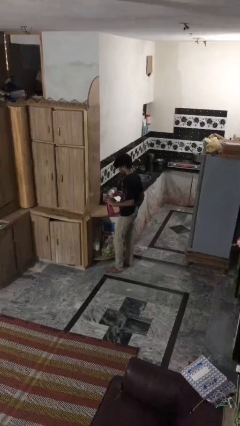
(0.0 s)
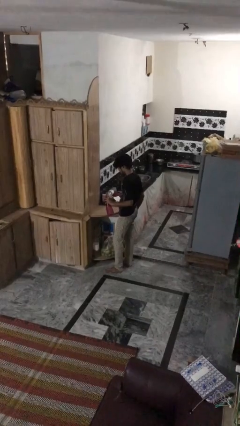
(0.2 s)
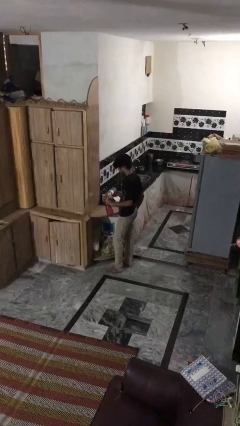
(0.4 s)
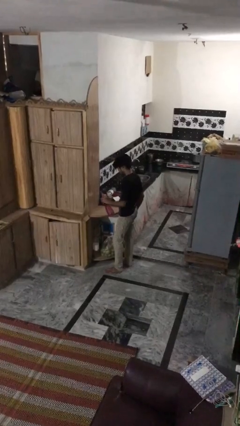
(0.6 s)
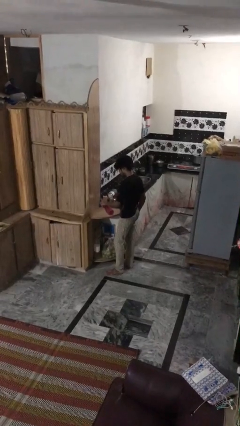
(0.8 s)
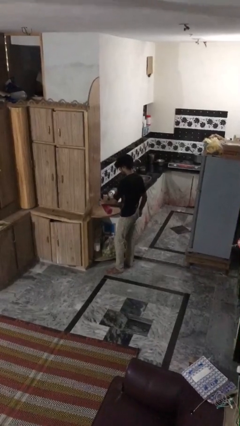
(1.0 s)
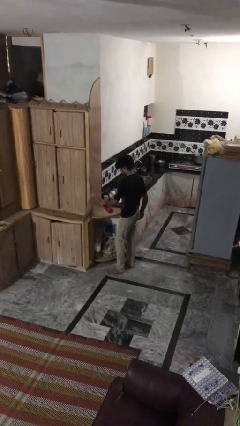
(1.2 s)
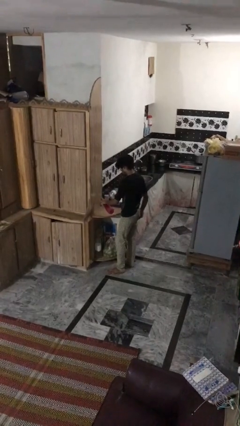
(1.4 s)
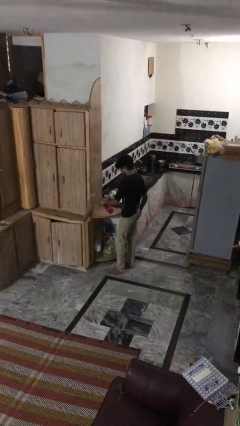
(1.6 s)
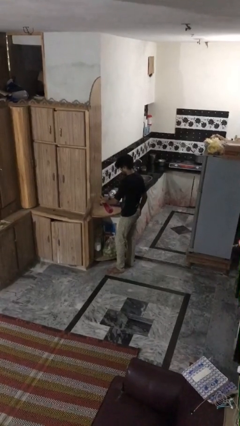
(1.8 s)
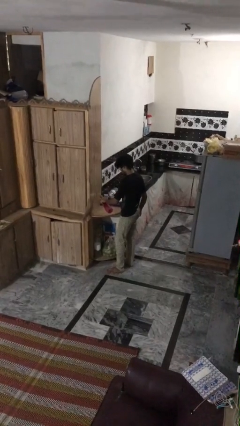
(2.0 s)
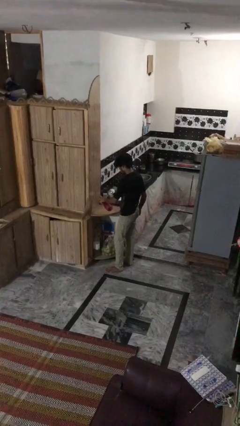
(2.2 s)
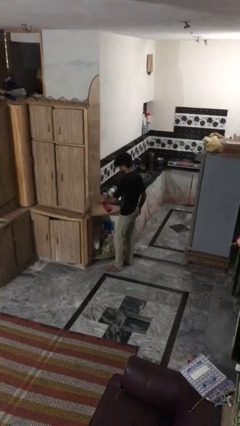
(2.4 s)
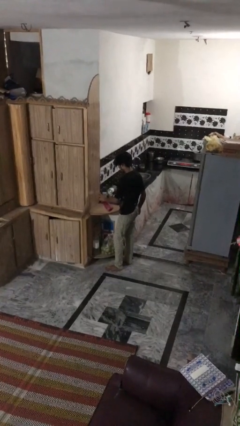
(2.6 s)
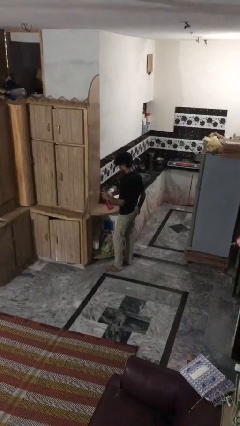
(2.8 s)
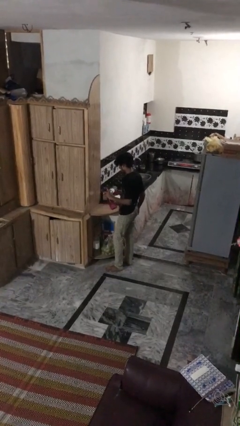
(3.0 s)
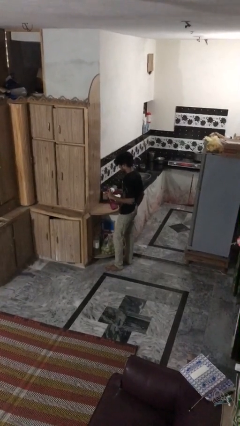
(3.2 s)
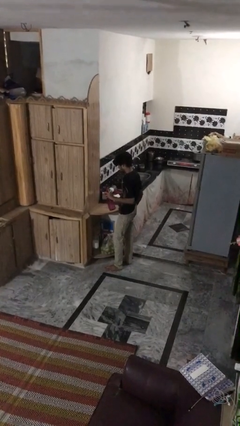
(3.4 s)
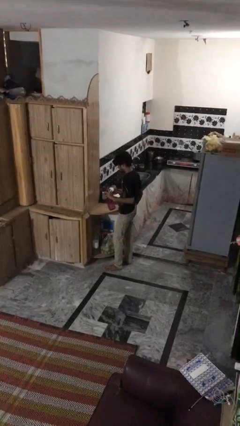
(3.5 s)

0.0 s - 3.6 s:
person sprays from bottle

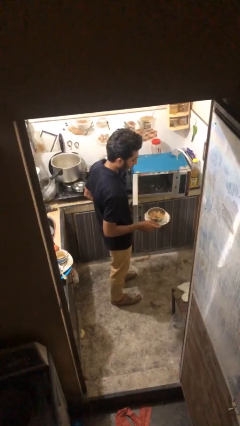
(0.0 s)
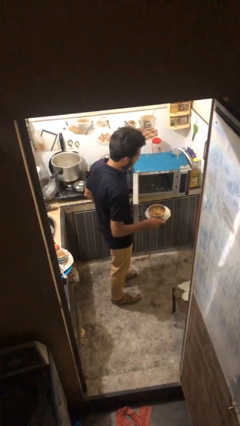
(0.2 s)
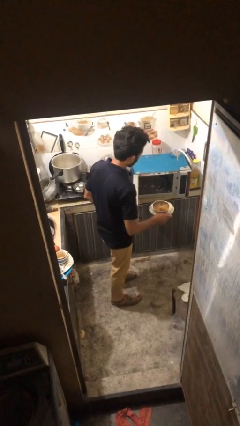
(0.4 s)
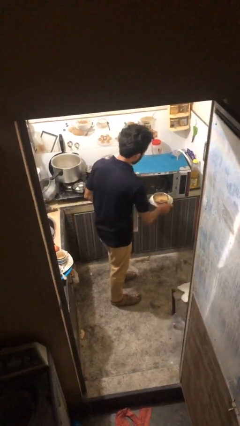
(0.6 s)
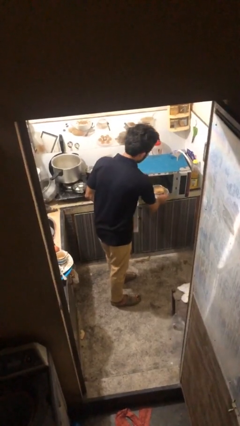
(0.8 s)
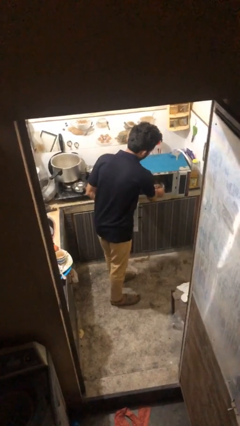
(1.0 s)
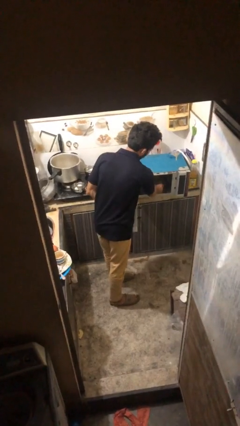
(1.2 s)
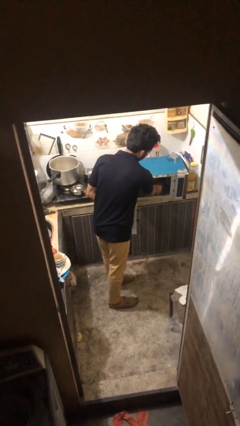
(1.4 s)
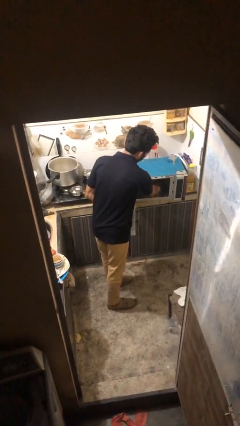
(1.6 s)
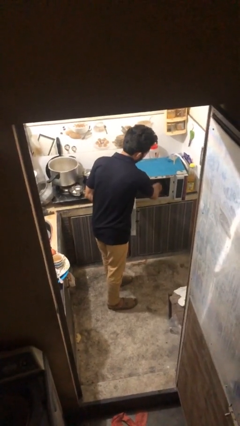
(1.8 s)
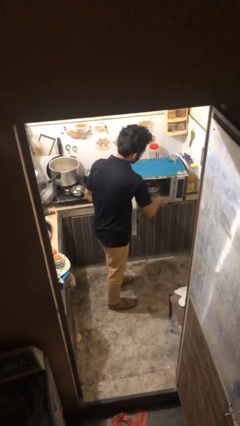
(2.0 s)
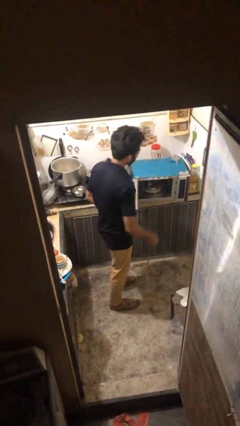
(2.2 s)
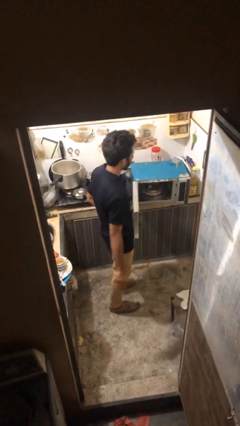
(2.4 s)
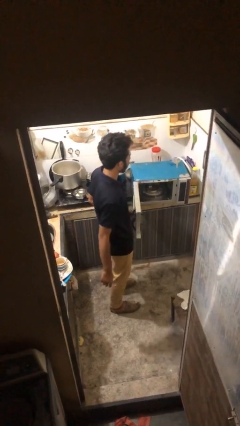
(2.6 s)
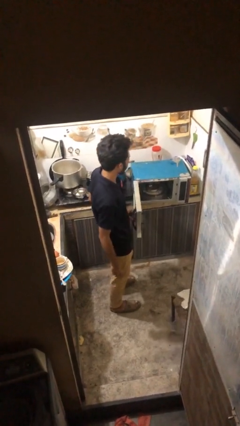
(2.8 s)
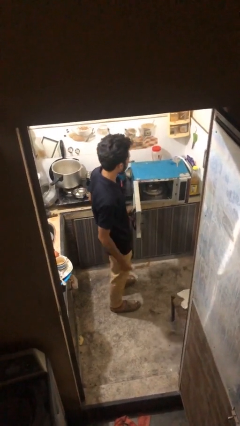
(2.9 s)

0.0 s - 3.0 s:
person puts object into microwave

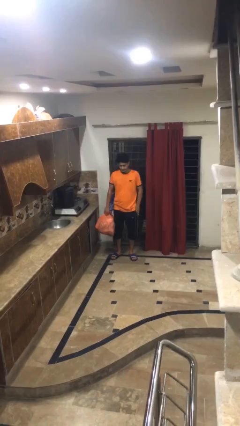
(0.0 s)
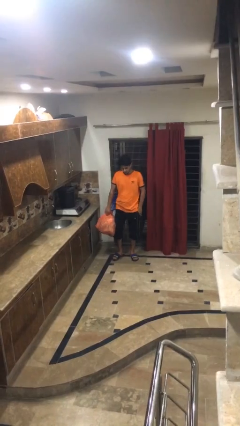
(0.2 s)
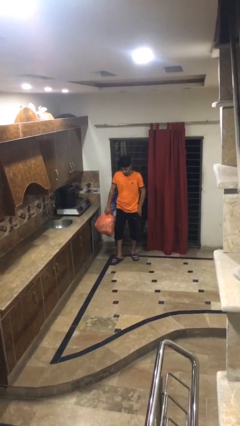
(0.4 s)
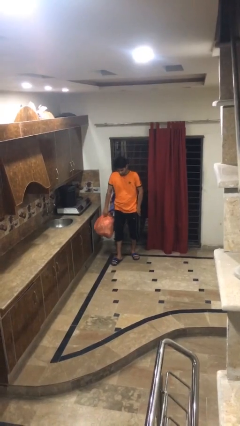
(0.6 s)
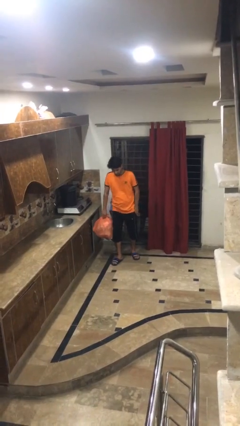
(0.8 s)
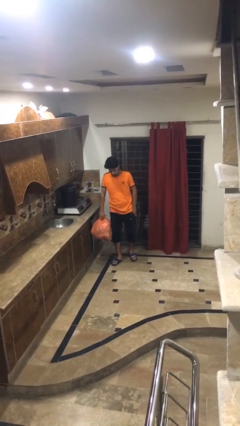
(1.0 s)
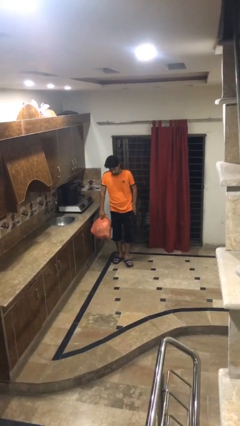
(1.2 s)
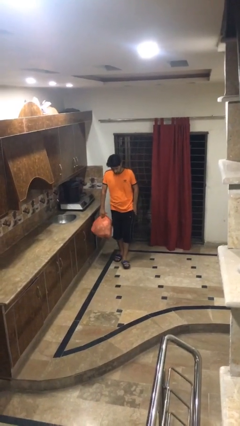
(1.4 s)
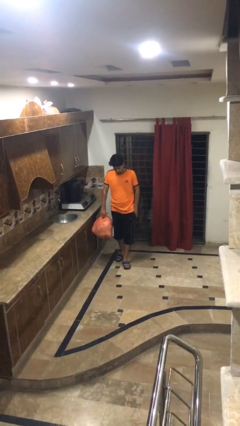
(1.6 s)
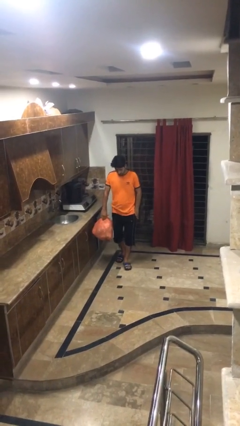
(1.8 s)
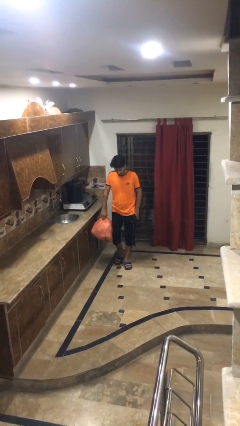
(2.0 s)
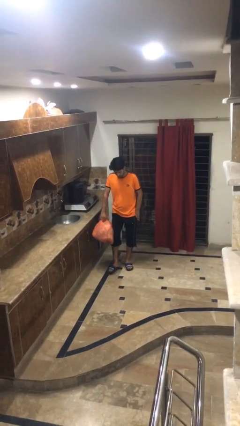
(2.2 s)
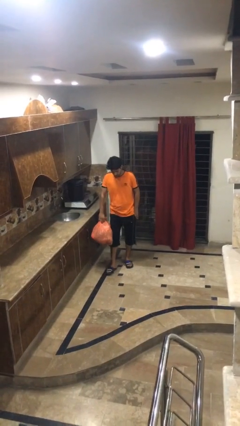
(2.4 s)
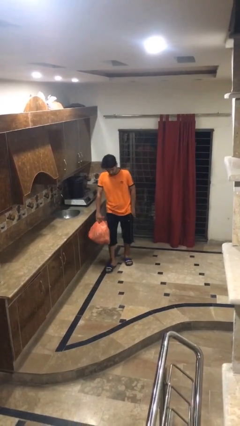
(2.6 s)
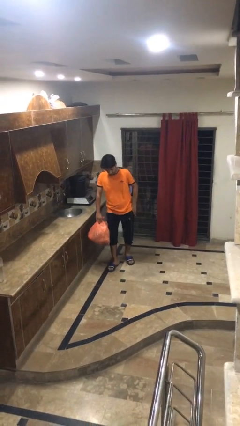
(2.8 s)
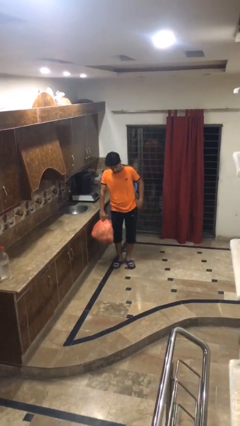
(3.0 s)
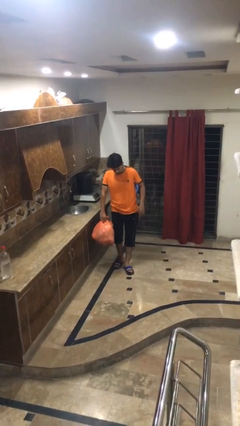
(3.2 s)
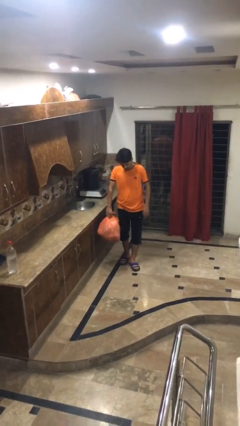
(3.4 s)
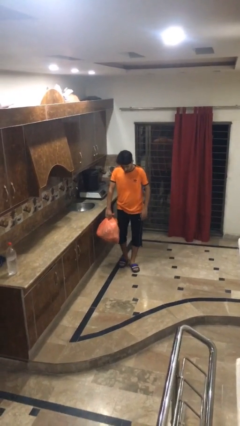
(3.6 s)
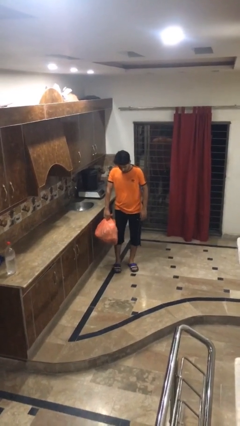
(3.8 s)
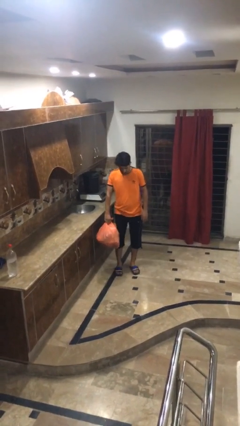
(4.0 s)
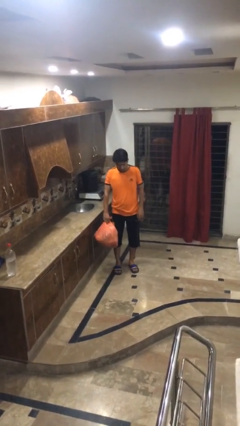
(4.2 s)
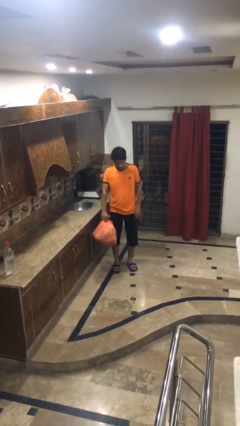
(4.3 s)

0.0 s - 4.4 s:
person carries groceries

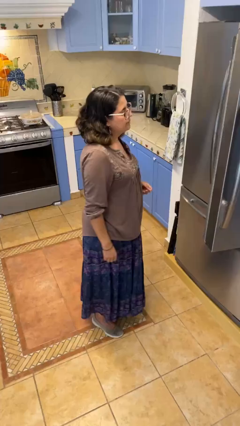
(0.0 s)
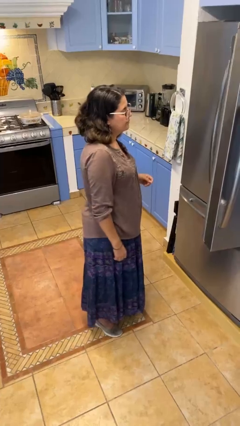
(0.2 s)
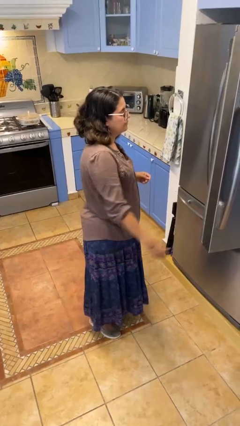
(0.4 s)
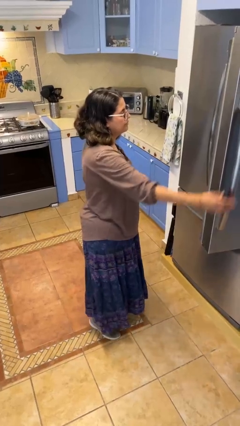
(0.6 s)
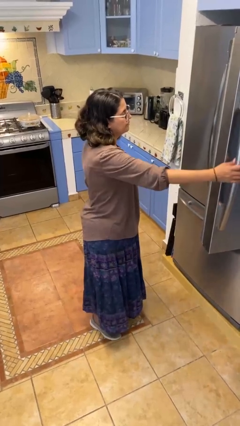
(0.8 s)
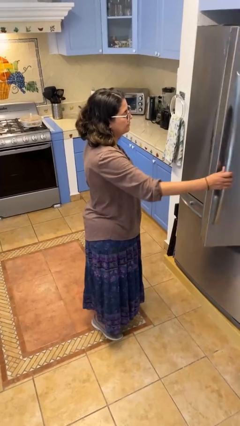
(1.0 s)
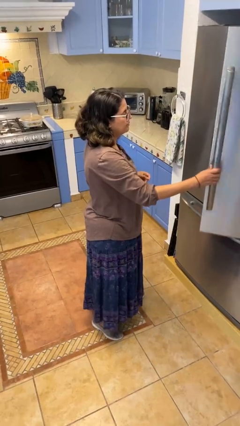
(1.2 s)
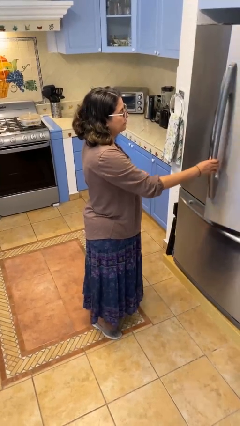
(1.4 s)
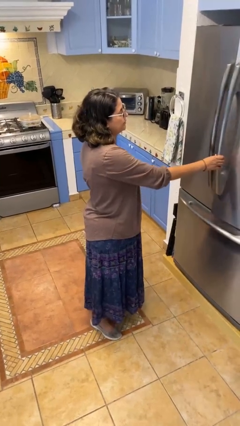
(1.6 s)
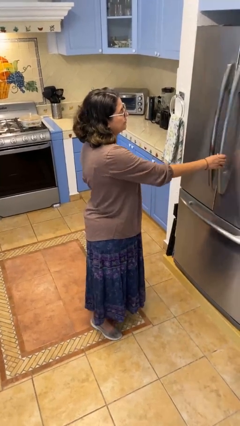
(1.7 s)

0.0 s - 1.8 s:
person closes refrigerator

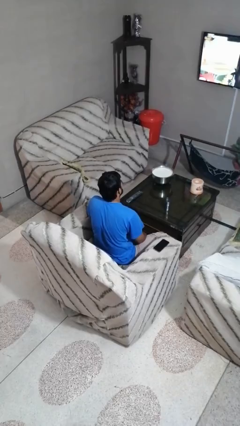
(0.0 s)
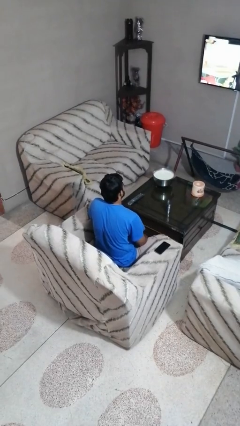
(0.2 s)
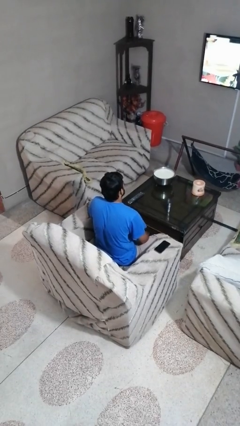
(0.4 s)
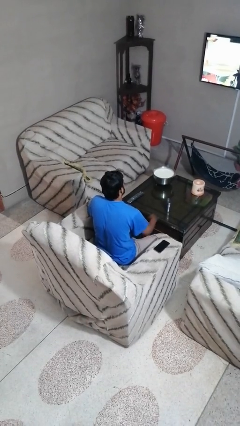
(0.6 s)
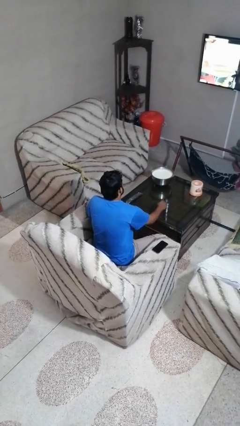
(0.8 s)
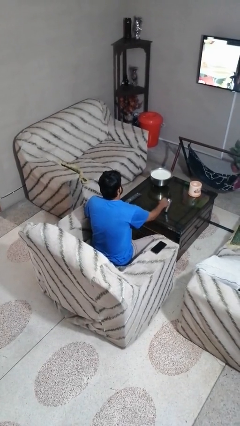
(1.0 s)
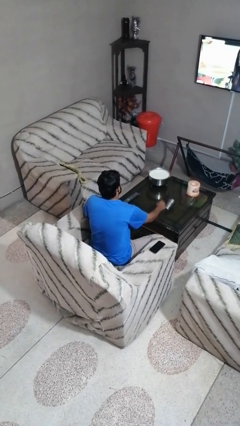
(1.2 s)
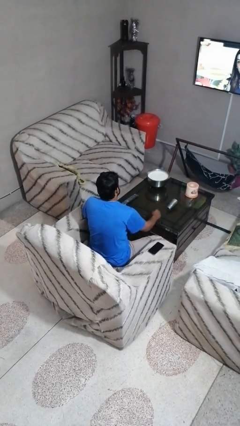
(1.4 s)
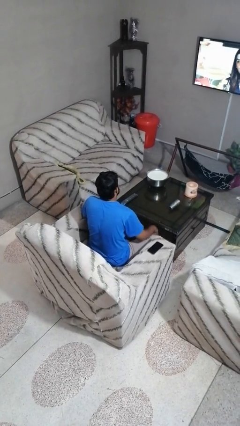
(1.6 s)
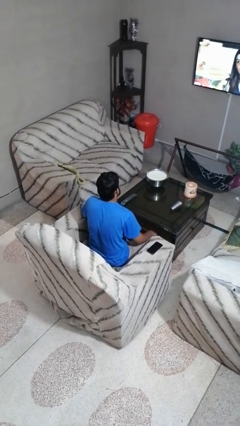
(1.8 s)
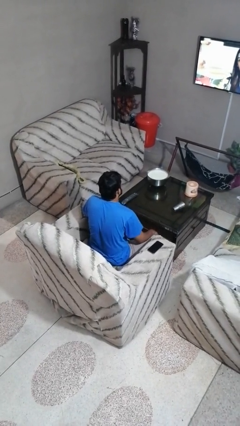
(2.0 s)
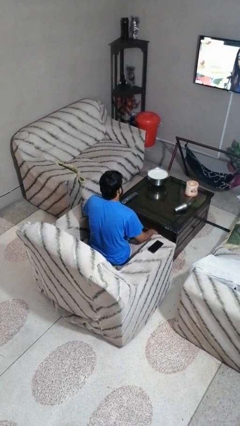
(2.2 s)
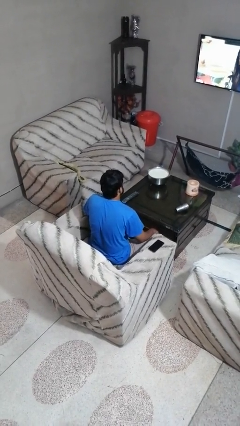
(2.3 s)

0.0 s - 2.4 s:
person knocks over glass

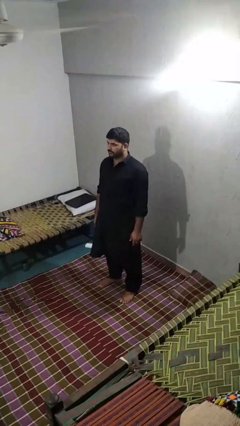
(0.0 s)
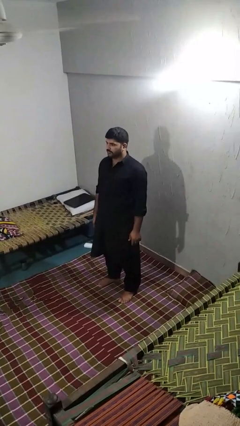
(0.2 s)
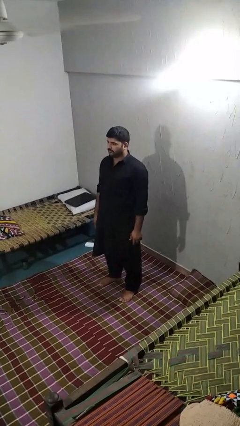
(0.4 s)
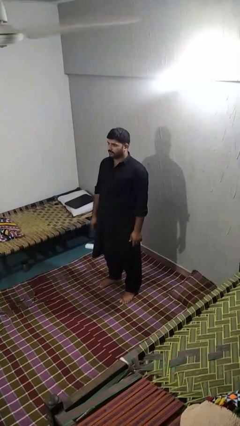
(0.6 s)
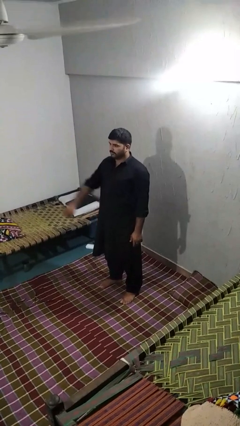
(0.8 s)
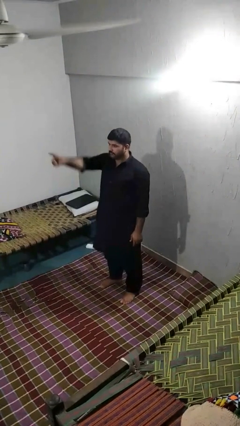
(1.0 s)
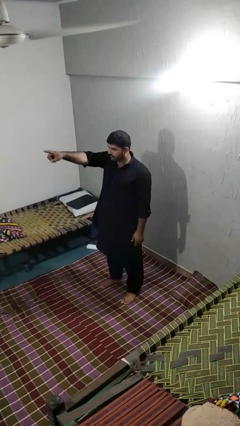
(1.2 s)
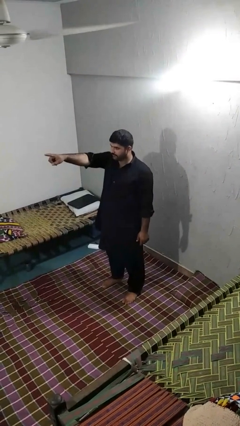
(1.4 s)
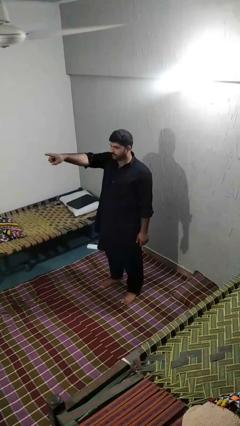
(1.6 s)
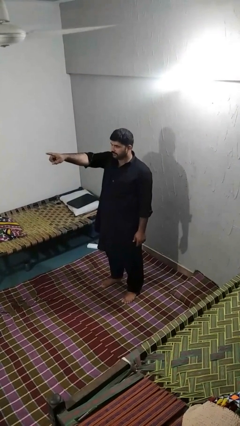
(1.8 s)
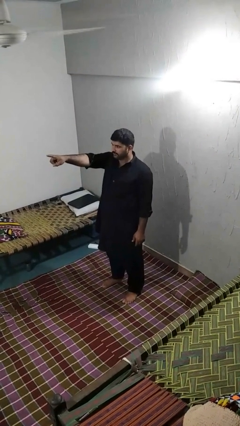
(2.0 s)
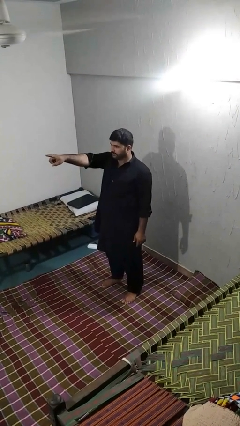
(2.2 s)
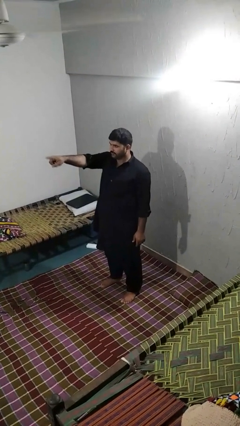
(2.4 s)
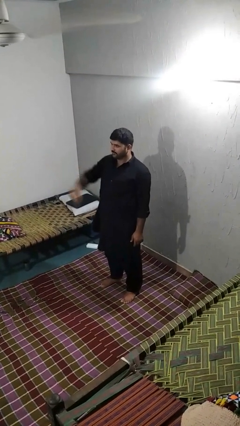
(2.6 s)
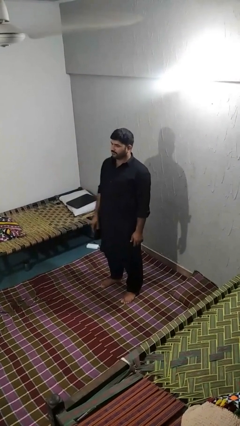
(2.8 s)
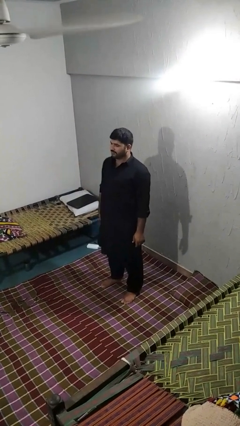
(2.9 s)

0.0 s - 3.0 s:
person points at person
